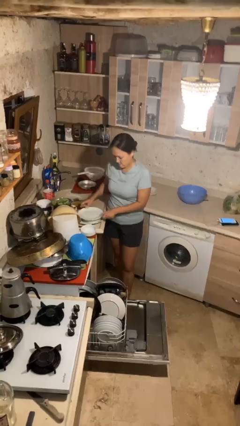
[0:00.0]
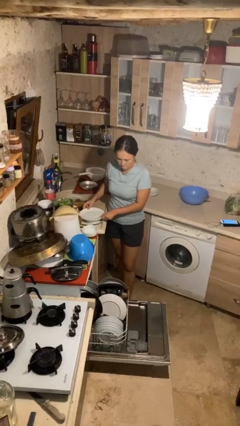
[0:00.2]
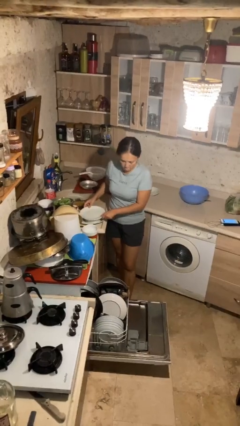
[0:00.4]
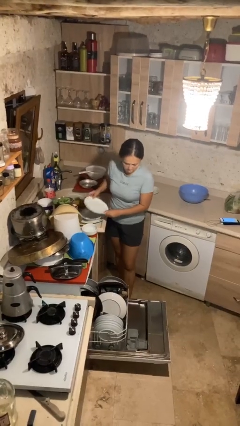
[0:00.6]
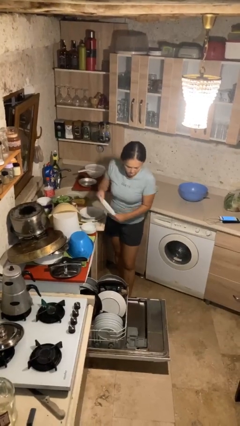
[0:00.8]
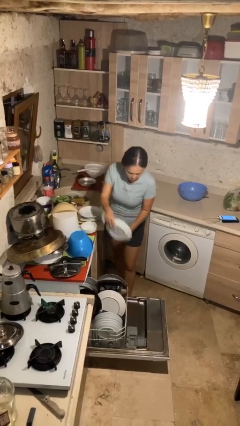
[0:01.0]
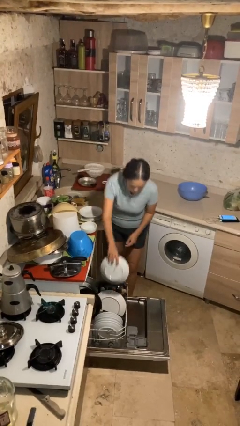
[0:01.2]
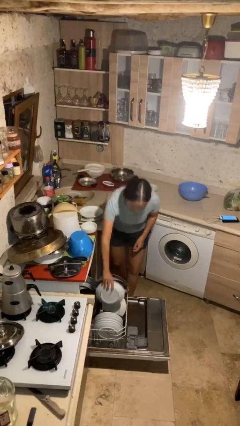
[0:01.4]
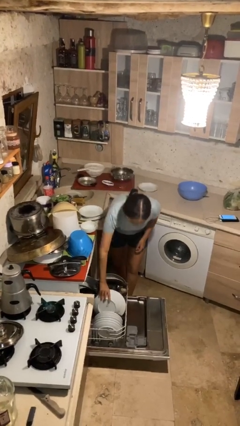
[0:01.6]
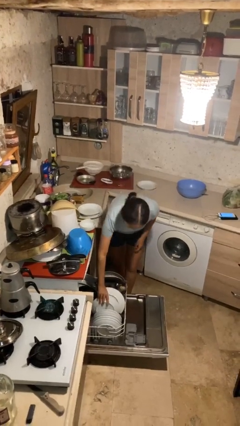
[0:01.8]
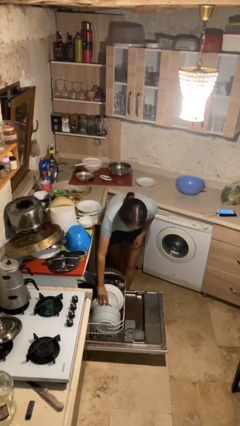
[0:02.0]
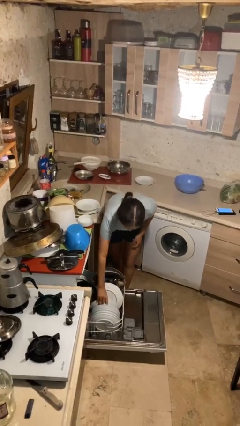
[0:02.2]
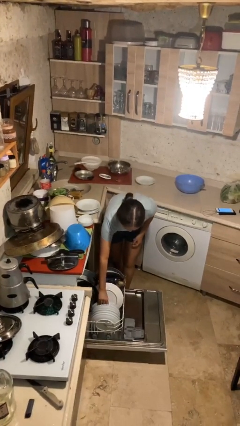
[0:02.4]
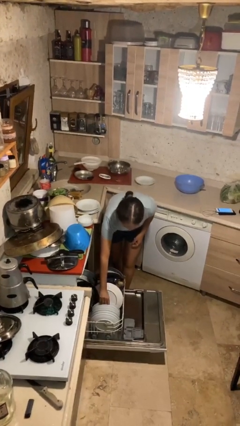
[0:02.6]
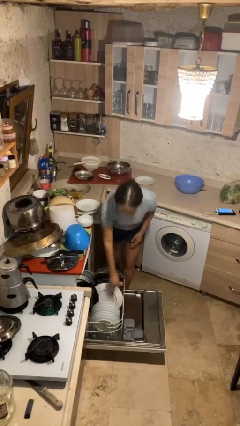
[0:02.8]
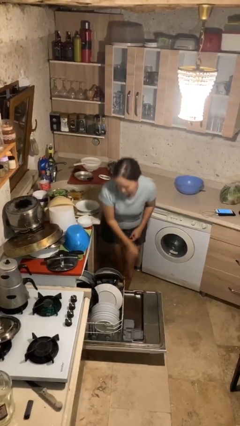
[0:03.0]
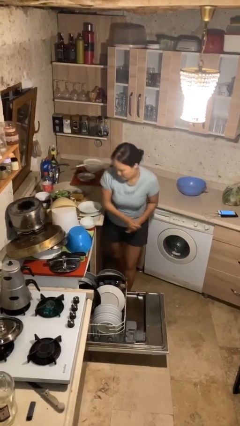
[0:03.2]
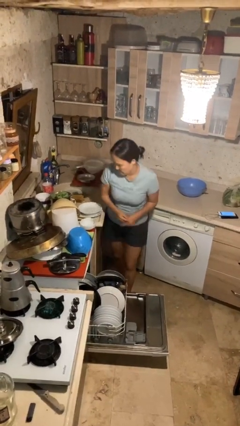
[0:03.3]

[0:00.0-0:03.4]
person loads dishwasher

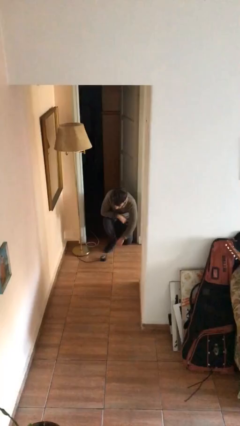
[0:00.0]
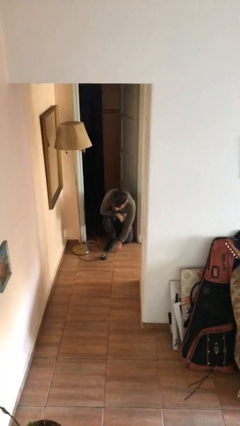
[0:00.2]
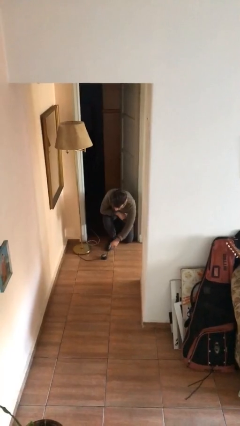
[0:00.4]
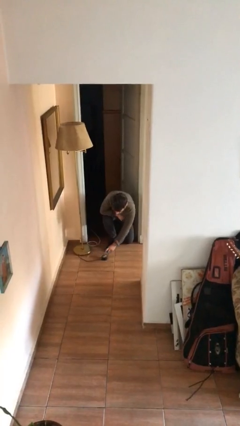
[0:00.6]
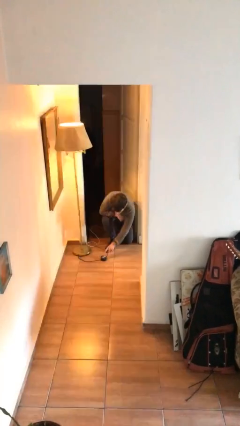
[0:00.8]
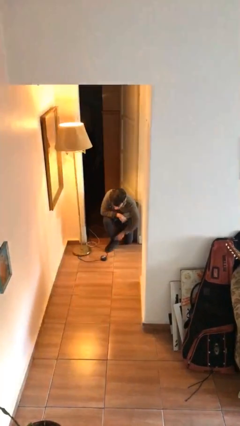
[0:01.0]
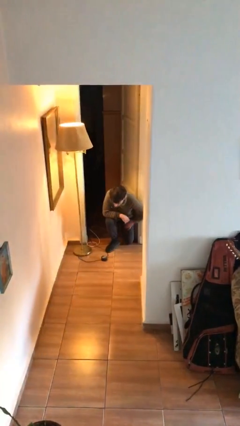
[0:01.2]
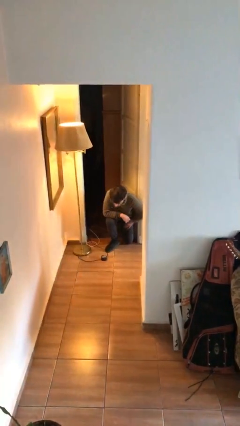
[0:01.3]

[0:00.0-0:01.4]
person turns on lamp

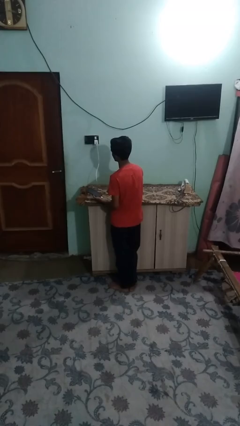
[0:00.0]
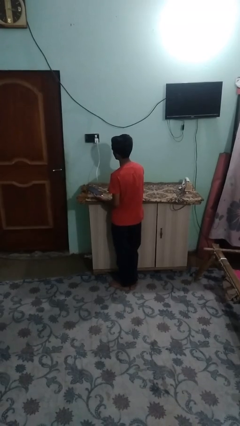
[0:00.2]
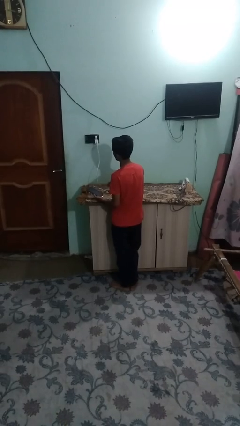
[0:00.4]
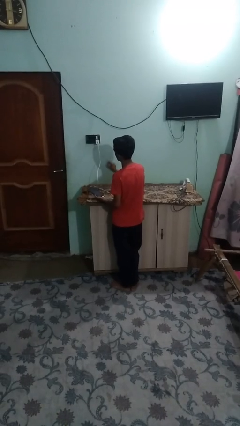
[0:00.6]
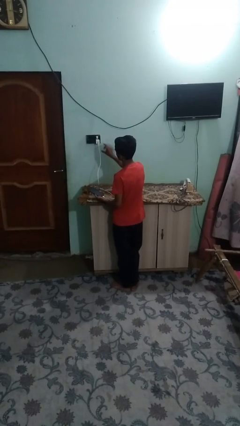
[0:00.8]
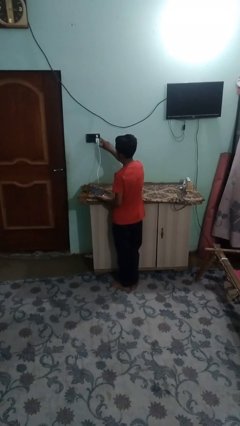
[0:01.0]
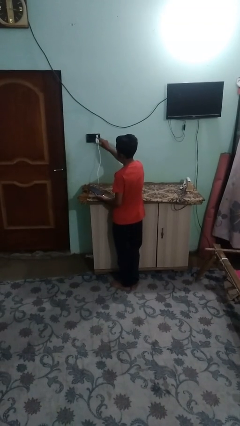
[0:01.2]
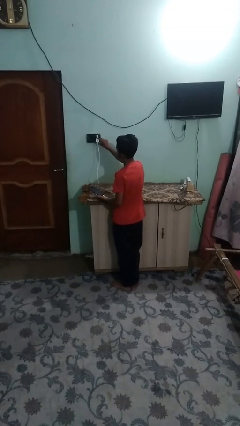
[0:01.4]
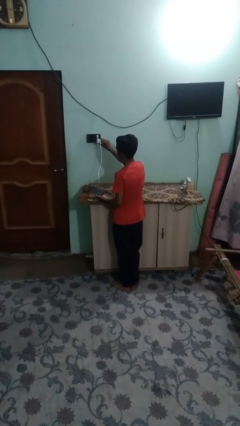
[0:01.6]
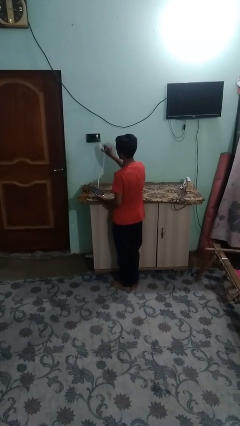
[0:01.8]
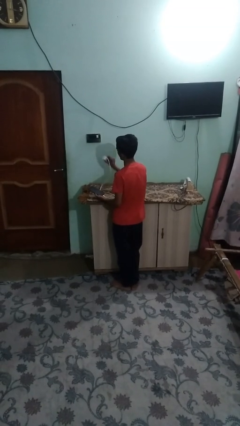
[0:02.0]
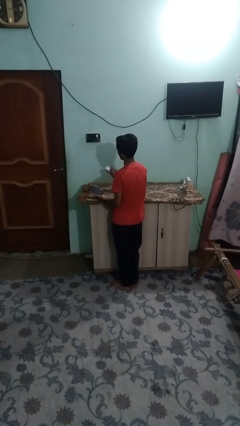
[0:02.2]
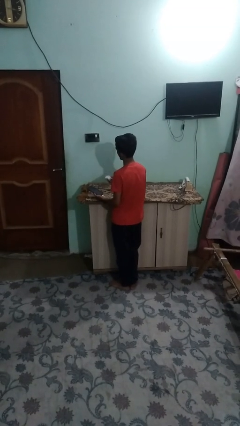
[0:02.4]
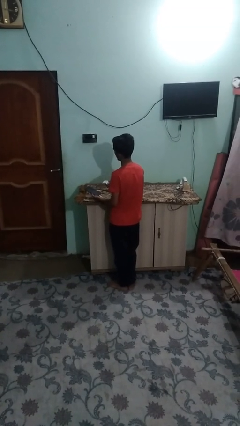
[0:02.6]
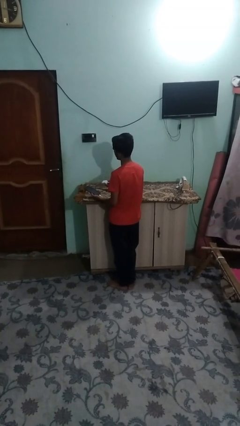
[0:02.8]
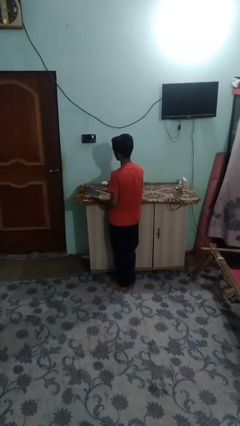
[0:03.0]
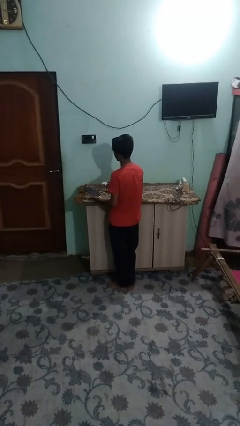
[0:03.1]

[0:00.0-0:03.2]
person unplugs from electrical socket

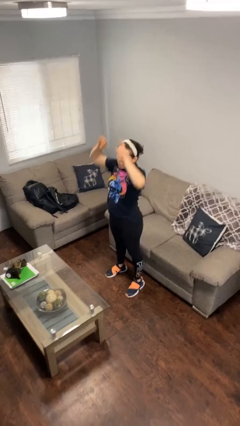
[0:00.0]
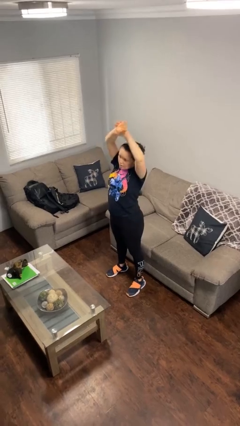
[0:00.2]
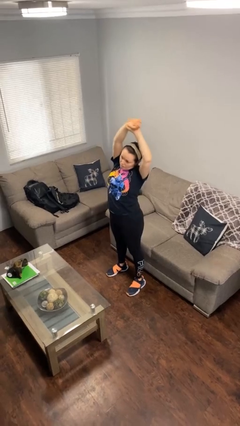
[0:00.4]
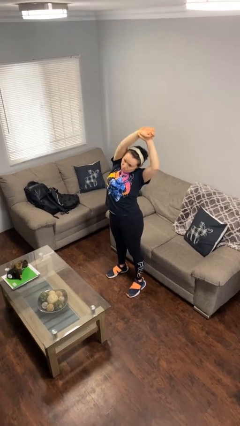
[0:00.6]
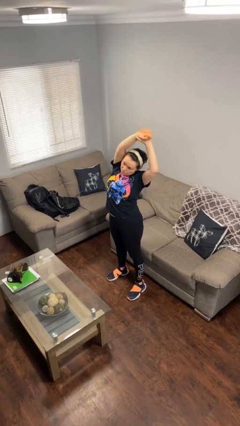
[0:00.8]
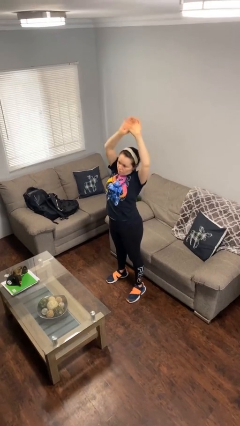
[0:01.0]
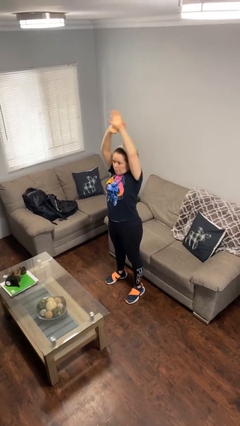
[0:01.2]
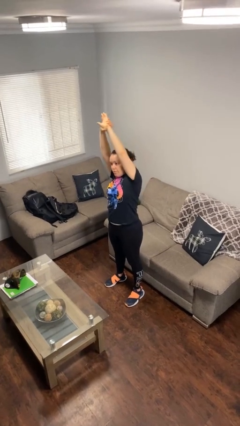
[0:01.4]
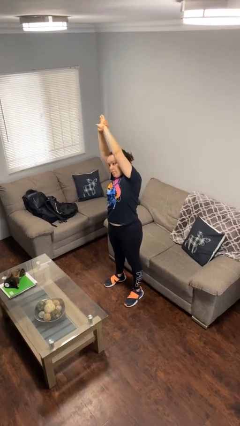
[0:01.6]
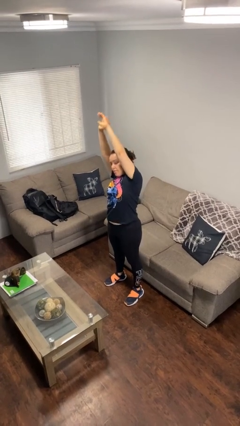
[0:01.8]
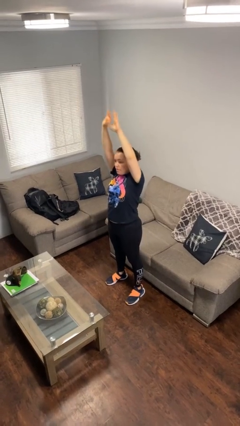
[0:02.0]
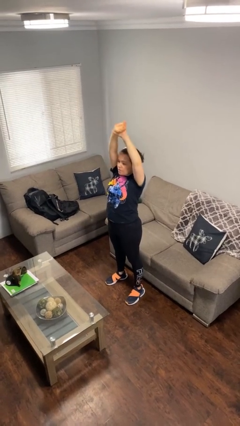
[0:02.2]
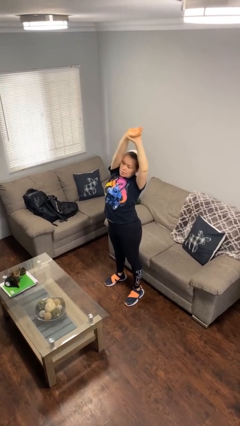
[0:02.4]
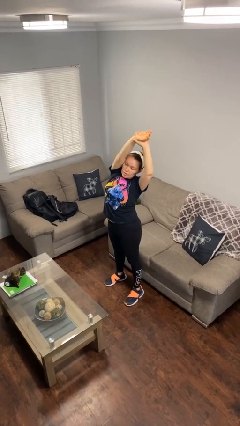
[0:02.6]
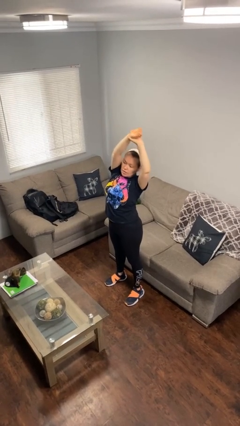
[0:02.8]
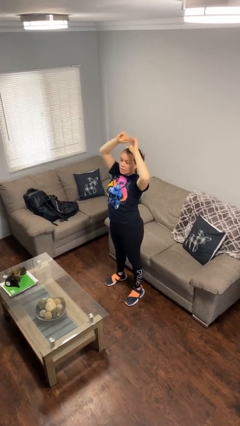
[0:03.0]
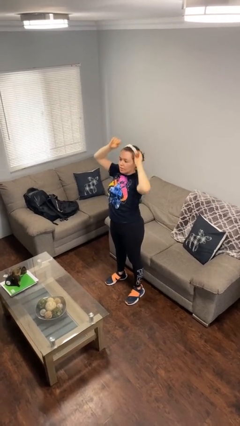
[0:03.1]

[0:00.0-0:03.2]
person stretches arms over head

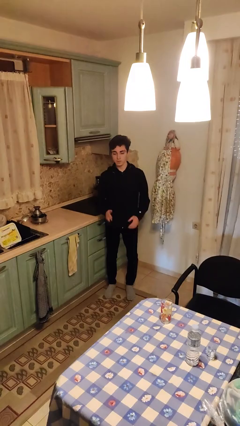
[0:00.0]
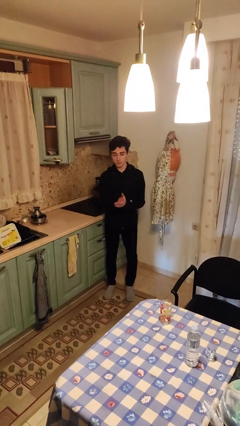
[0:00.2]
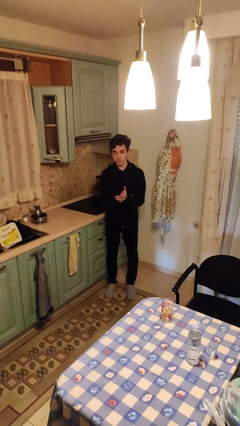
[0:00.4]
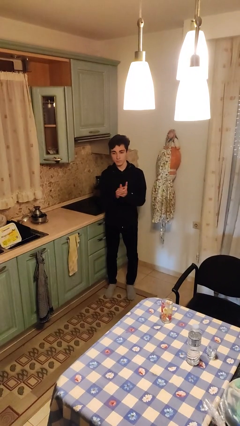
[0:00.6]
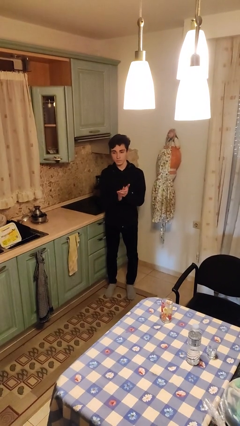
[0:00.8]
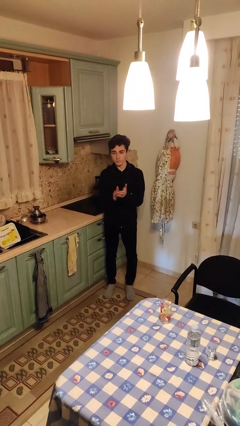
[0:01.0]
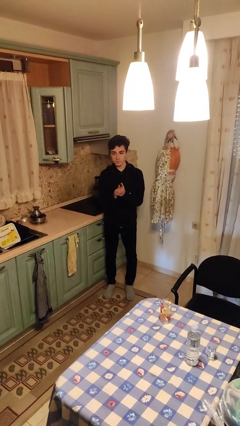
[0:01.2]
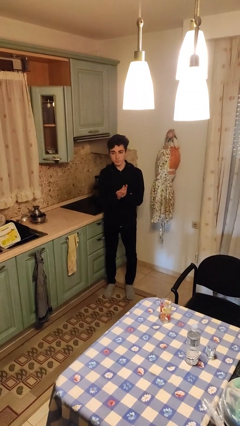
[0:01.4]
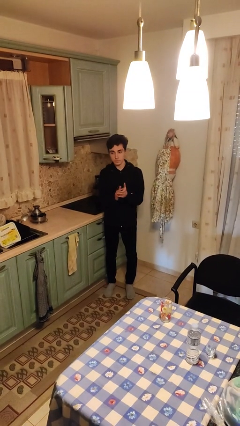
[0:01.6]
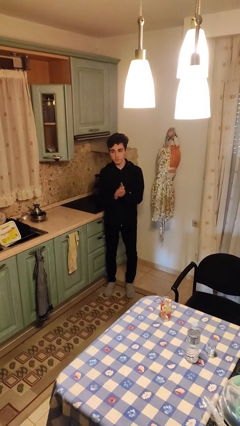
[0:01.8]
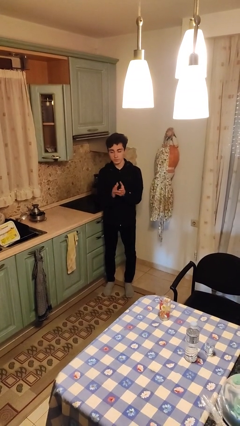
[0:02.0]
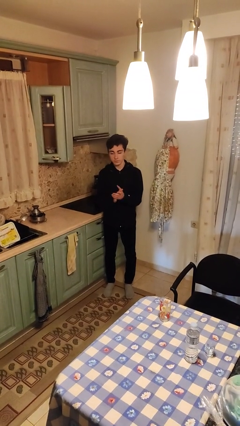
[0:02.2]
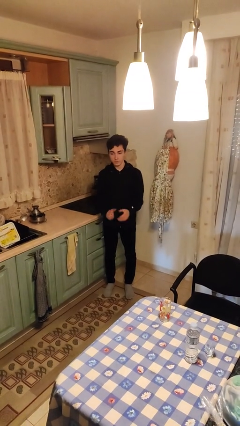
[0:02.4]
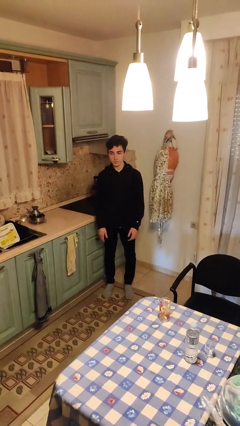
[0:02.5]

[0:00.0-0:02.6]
person claps hands

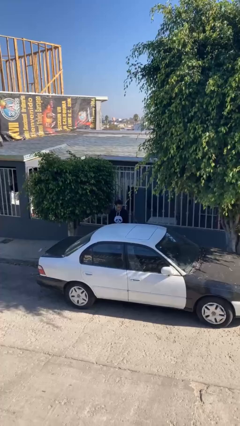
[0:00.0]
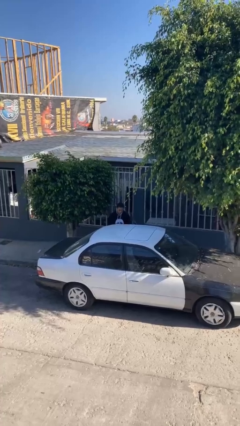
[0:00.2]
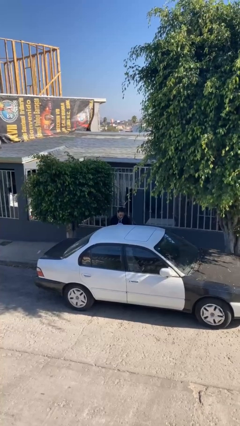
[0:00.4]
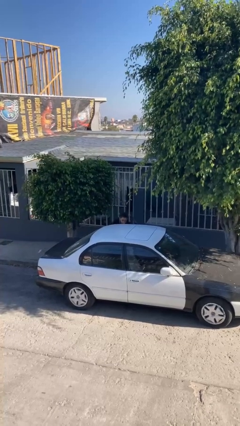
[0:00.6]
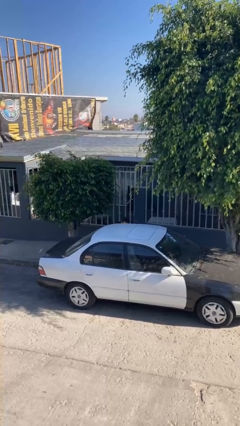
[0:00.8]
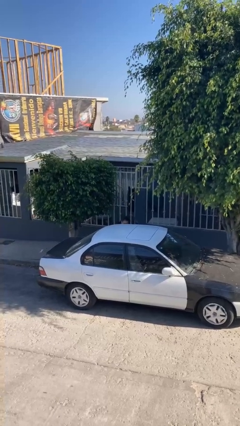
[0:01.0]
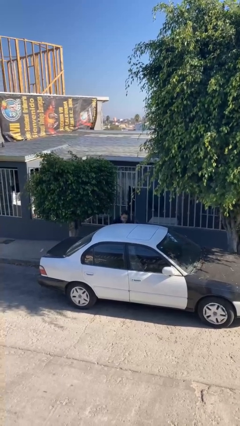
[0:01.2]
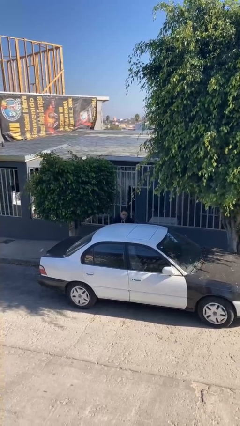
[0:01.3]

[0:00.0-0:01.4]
person unloads car

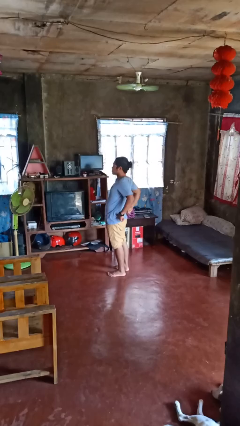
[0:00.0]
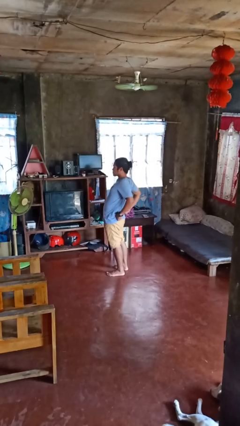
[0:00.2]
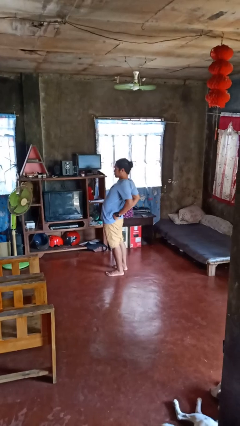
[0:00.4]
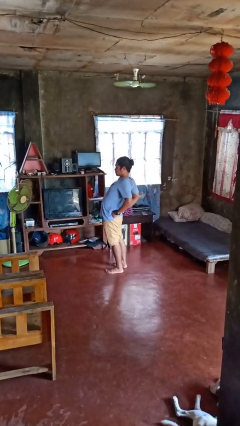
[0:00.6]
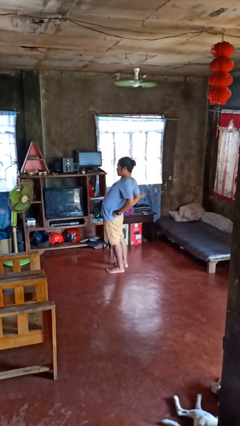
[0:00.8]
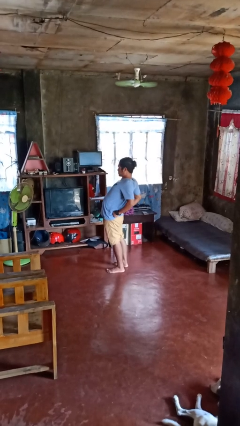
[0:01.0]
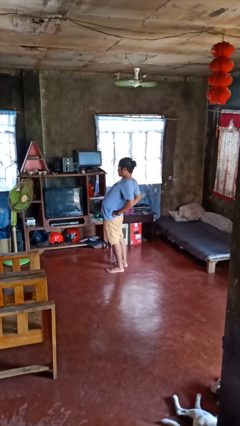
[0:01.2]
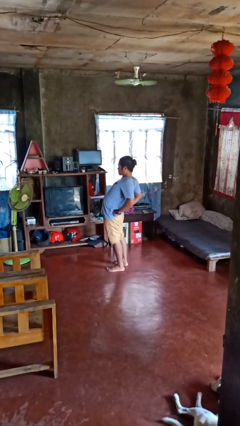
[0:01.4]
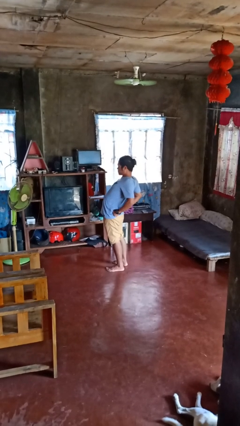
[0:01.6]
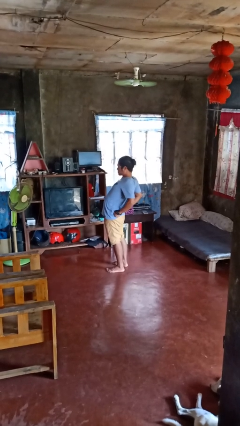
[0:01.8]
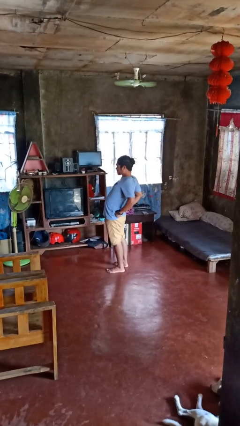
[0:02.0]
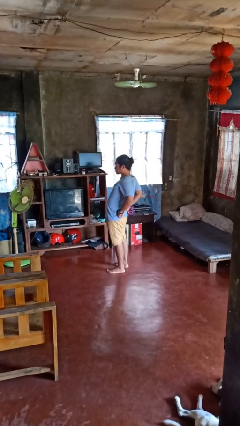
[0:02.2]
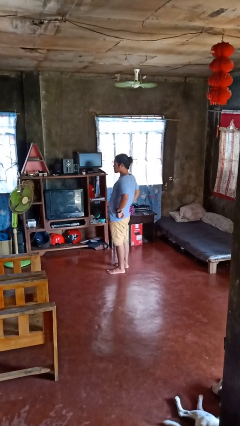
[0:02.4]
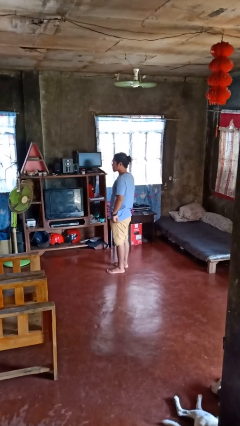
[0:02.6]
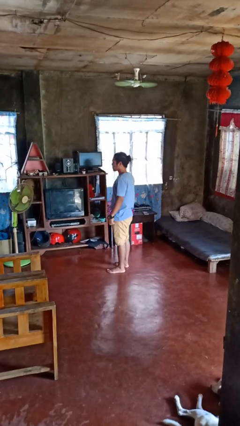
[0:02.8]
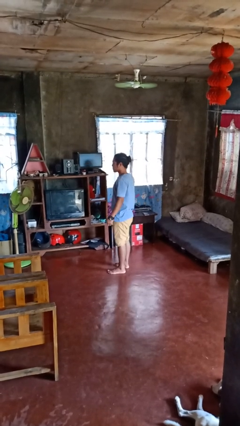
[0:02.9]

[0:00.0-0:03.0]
person stretches back
